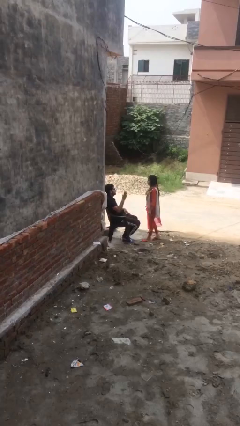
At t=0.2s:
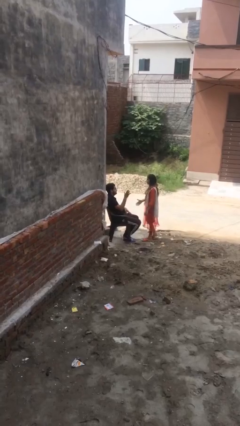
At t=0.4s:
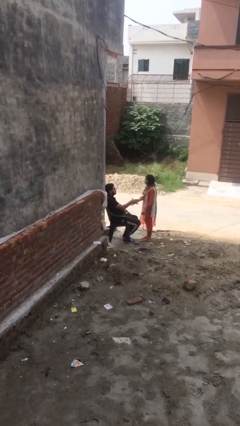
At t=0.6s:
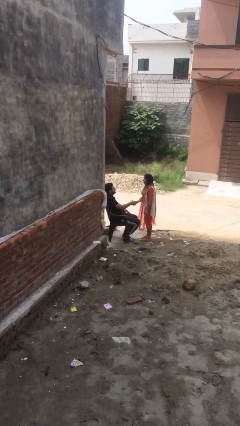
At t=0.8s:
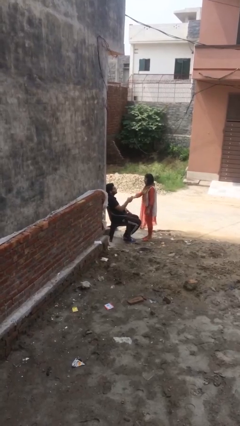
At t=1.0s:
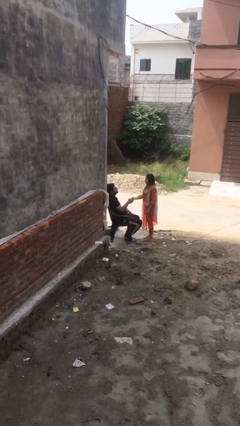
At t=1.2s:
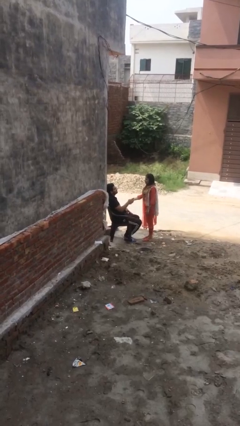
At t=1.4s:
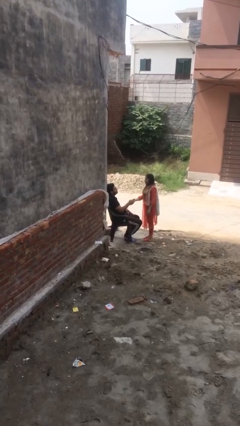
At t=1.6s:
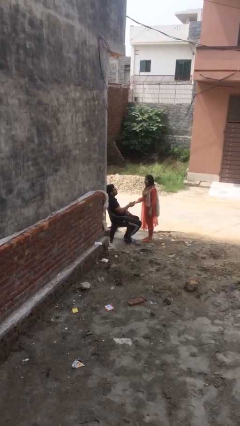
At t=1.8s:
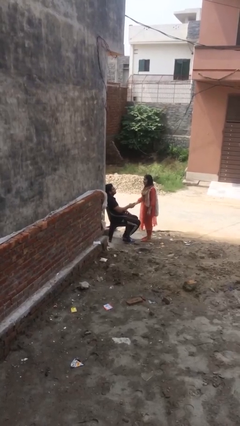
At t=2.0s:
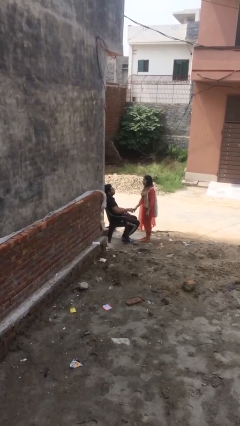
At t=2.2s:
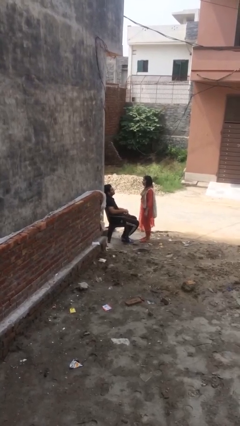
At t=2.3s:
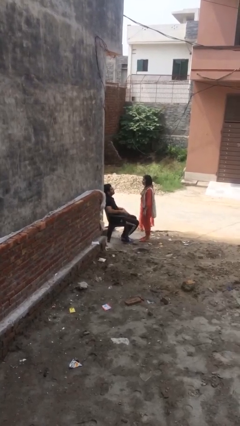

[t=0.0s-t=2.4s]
person shakes hand

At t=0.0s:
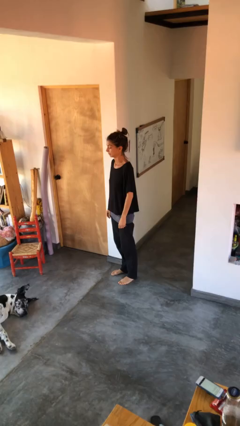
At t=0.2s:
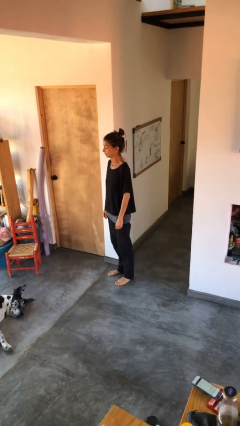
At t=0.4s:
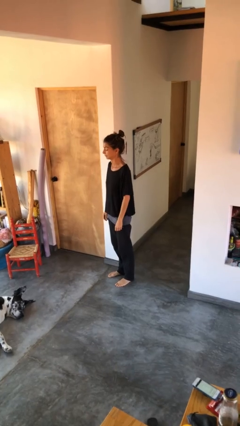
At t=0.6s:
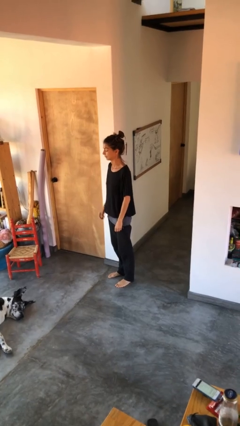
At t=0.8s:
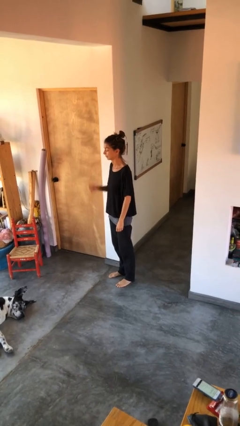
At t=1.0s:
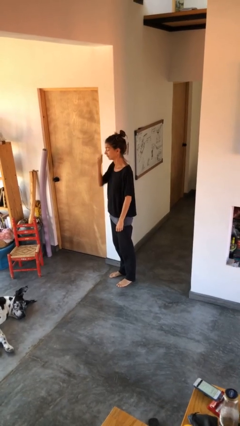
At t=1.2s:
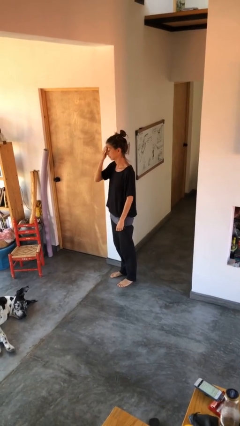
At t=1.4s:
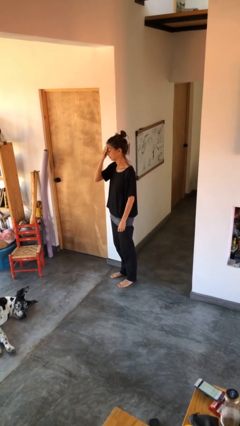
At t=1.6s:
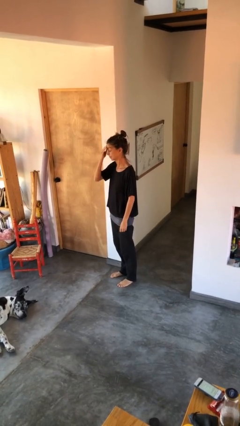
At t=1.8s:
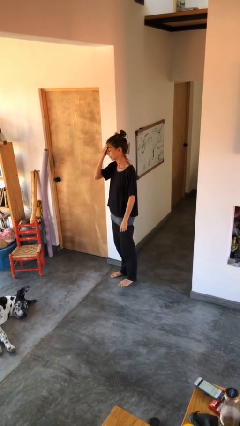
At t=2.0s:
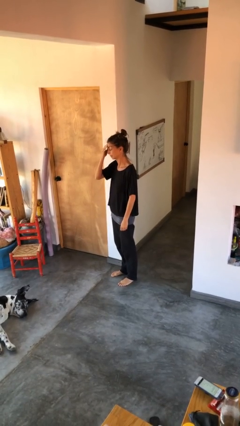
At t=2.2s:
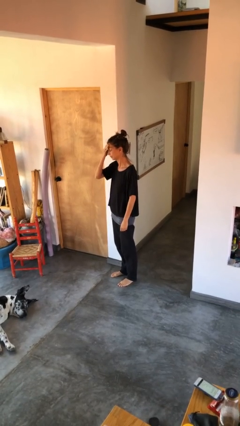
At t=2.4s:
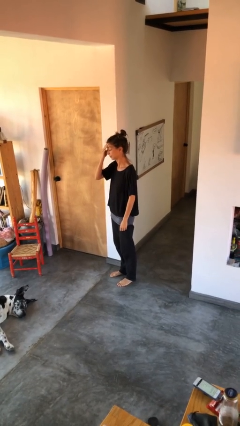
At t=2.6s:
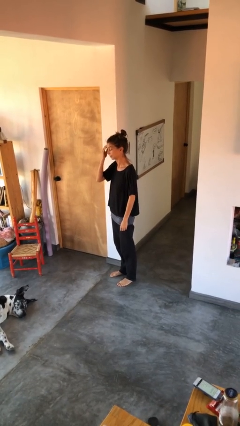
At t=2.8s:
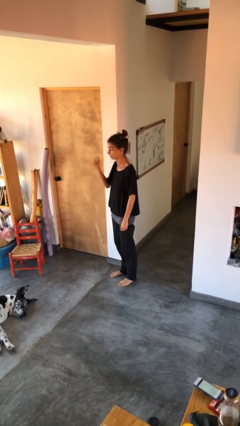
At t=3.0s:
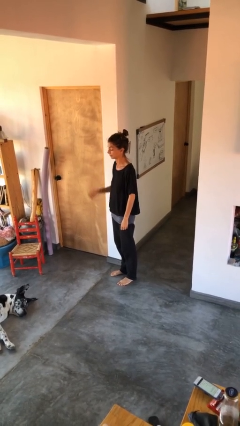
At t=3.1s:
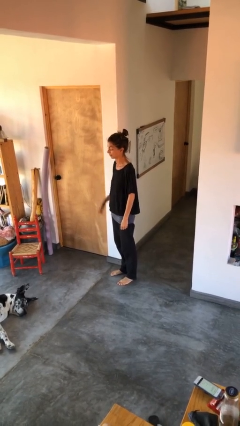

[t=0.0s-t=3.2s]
person scratches face

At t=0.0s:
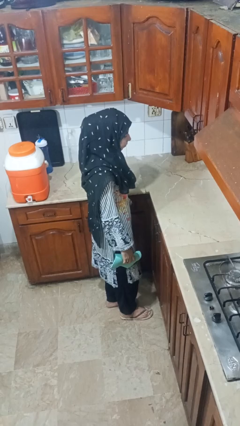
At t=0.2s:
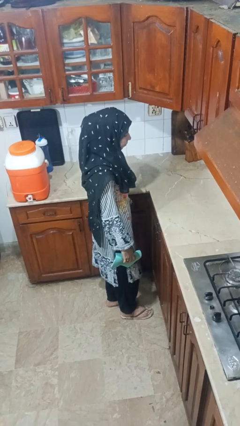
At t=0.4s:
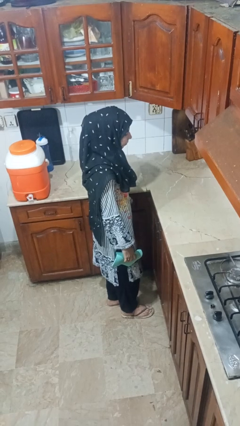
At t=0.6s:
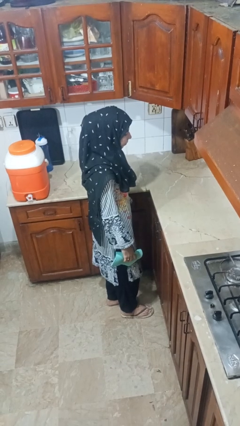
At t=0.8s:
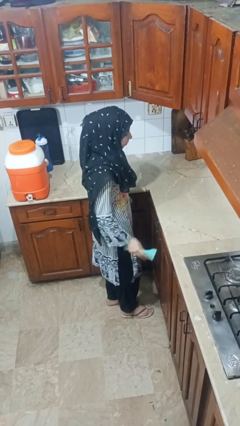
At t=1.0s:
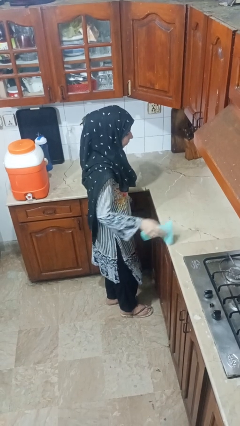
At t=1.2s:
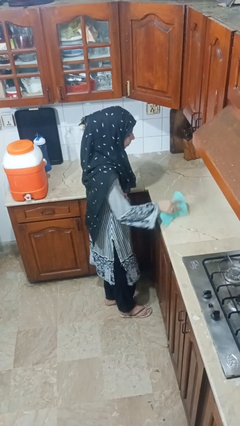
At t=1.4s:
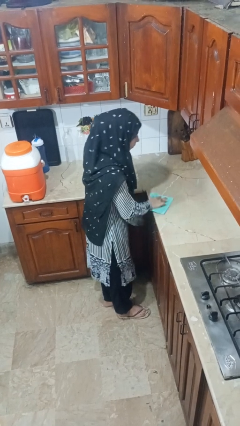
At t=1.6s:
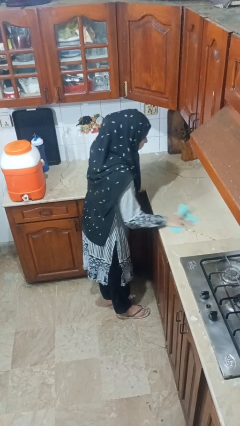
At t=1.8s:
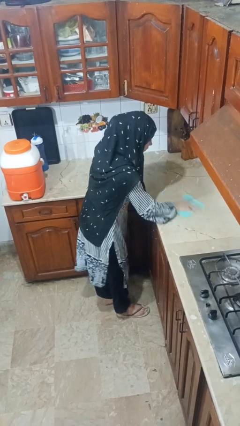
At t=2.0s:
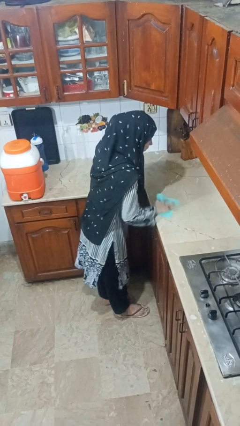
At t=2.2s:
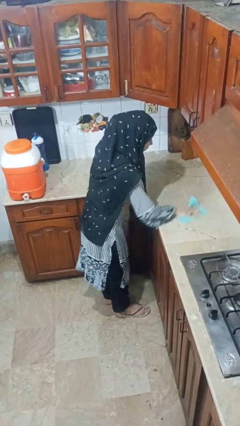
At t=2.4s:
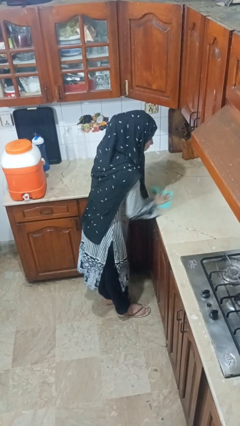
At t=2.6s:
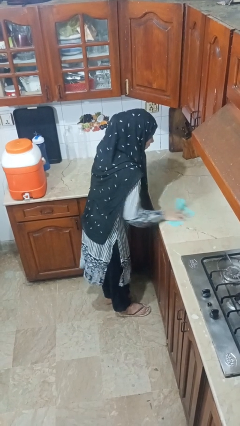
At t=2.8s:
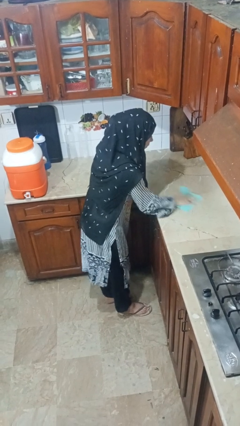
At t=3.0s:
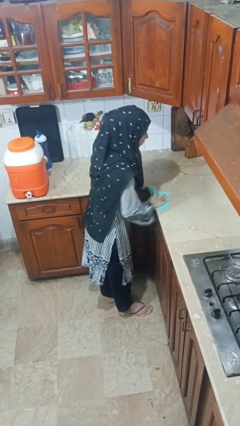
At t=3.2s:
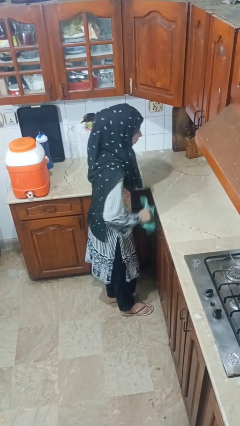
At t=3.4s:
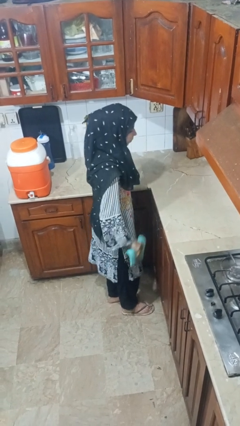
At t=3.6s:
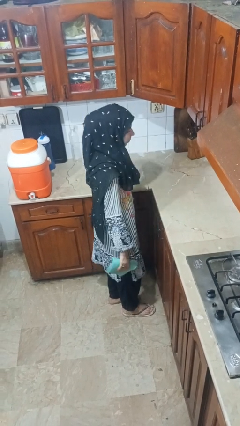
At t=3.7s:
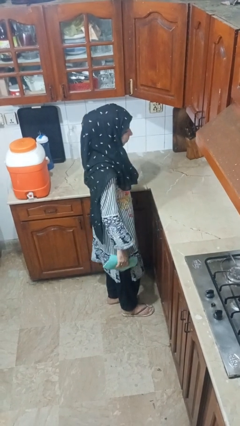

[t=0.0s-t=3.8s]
person cleans table with rag

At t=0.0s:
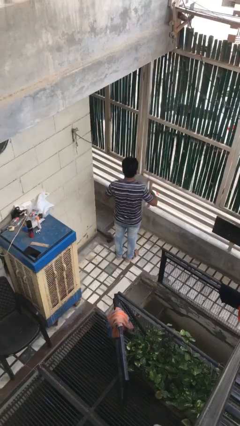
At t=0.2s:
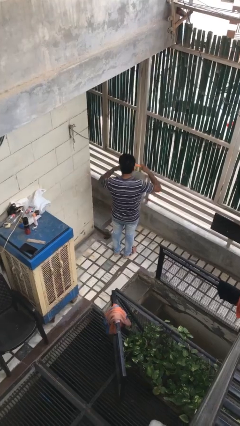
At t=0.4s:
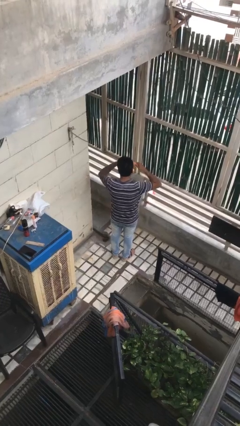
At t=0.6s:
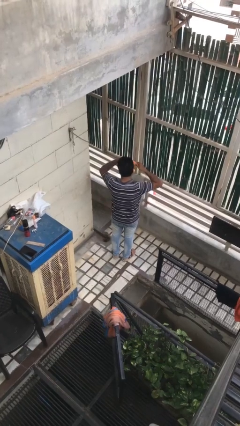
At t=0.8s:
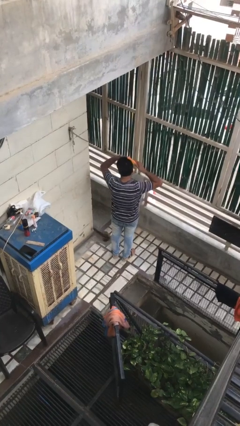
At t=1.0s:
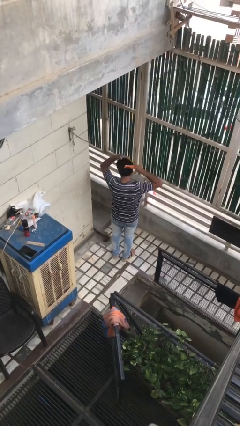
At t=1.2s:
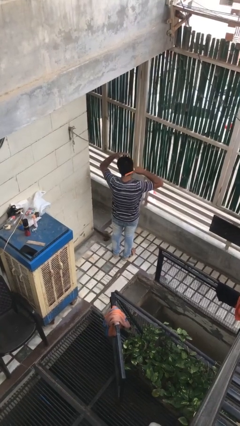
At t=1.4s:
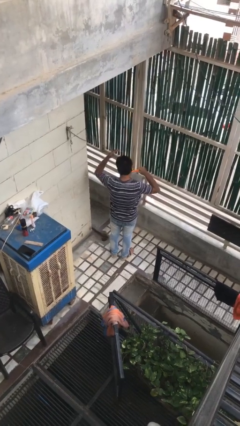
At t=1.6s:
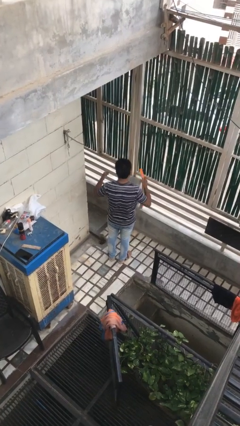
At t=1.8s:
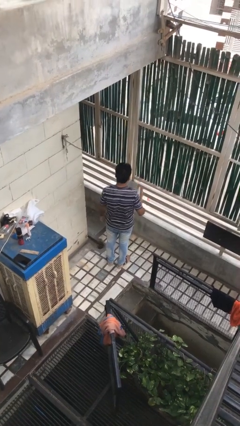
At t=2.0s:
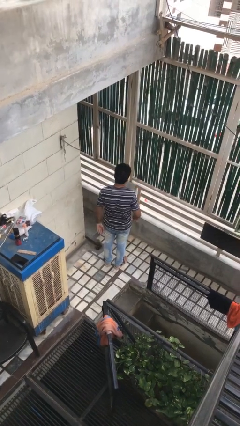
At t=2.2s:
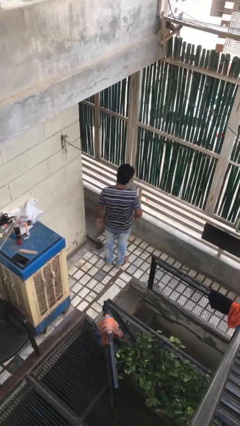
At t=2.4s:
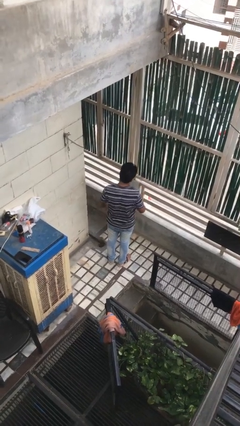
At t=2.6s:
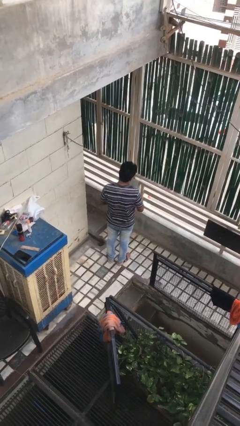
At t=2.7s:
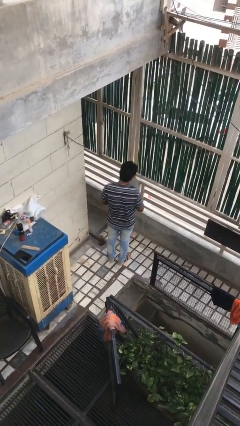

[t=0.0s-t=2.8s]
person brushes hair

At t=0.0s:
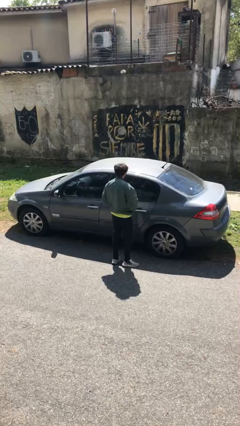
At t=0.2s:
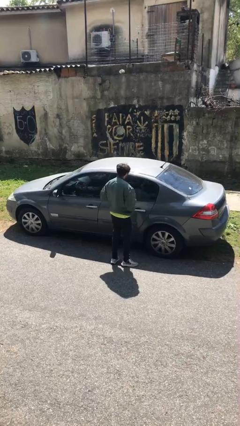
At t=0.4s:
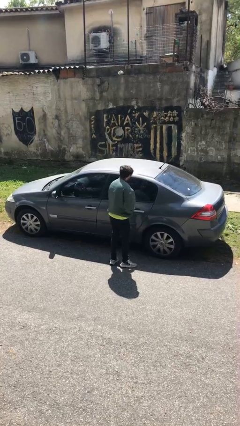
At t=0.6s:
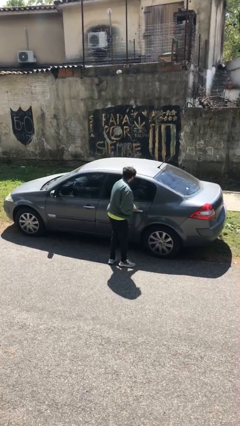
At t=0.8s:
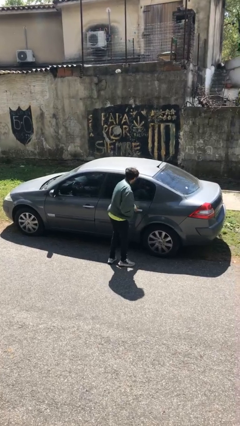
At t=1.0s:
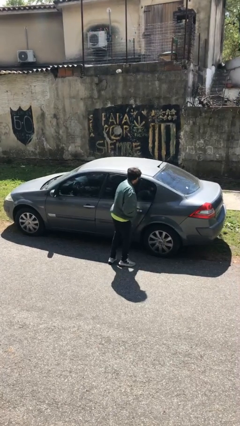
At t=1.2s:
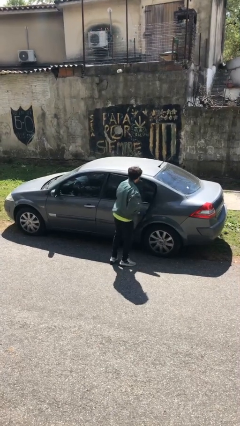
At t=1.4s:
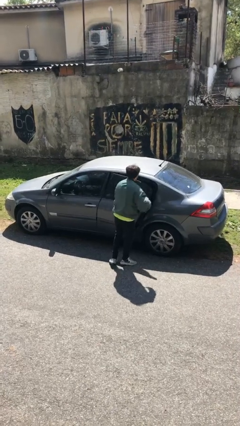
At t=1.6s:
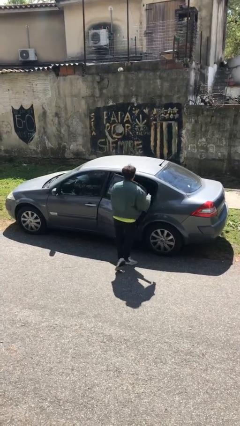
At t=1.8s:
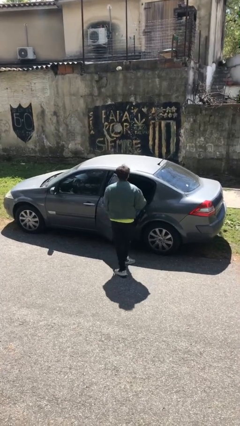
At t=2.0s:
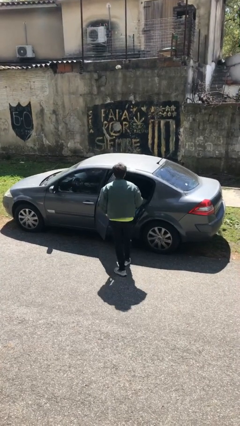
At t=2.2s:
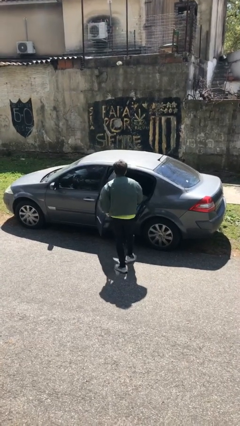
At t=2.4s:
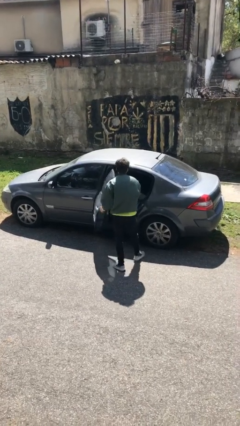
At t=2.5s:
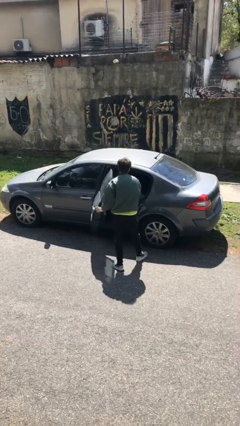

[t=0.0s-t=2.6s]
person opens car door

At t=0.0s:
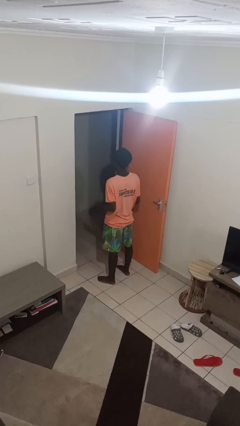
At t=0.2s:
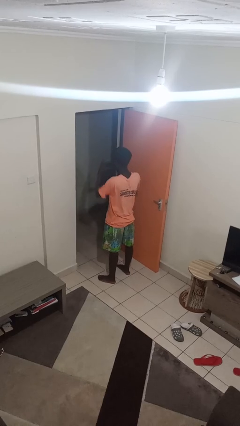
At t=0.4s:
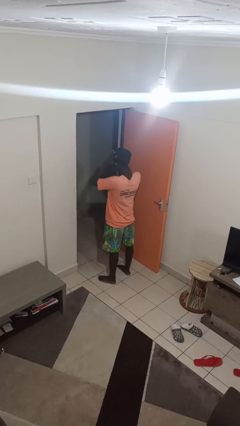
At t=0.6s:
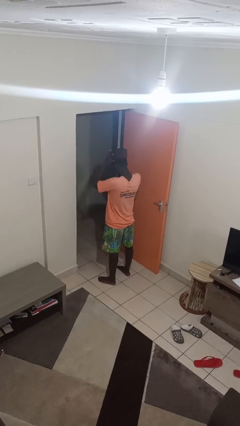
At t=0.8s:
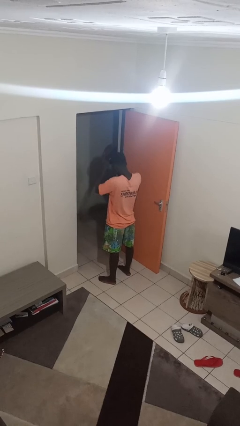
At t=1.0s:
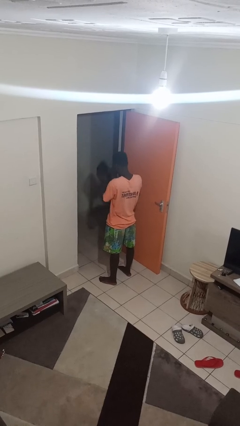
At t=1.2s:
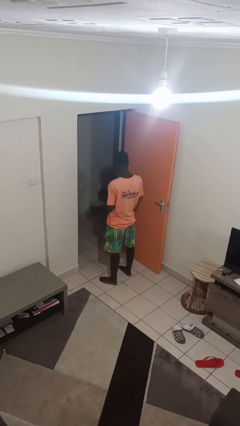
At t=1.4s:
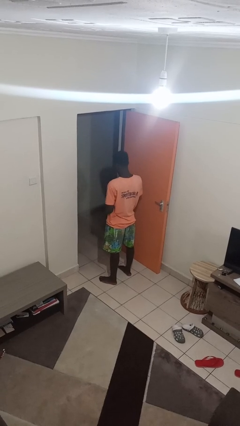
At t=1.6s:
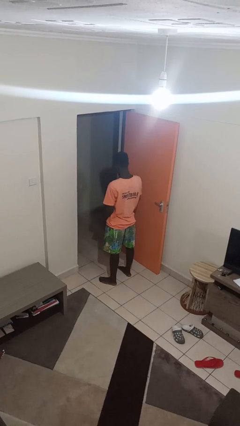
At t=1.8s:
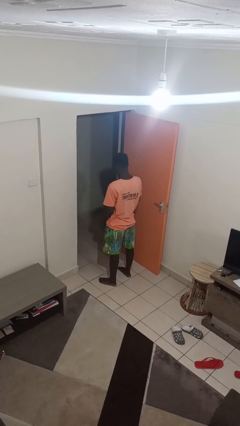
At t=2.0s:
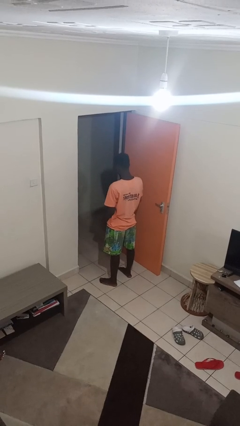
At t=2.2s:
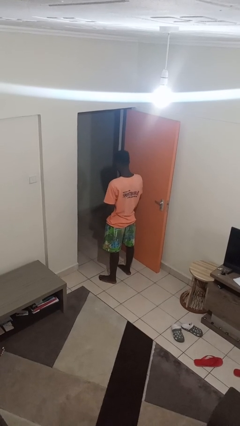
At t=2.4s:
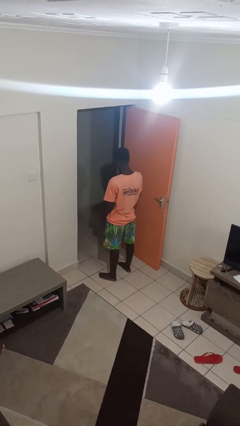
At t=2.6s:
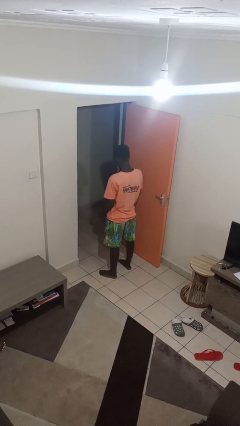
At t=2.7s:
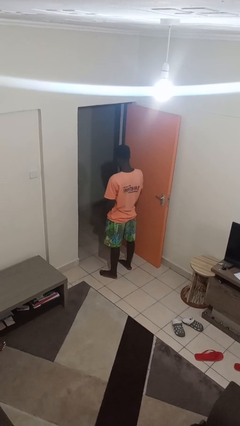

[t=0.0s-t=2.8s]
person takes off hat

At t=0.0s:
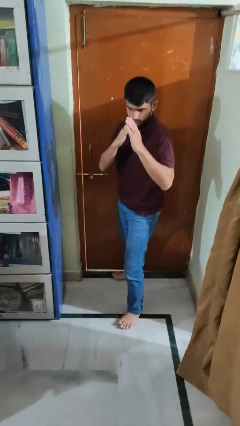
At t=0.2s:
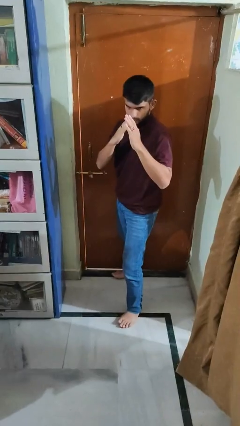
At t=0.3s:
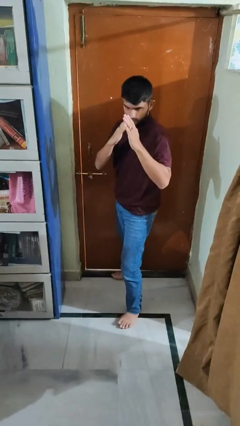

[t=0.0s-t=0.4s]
person karate kicks
